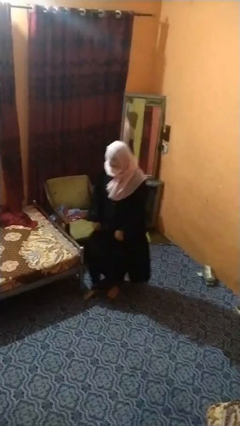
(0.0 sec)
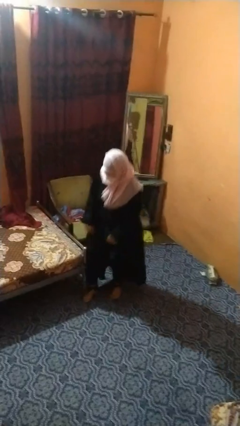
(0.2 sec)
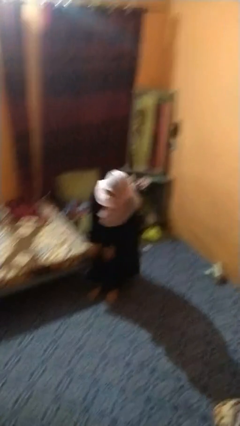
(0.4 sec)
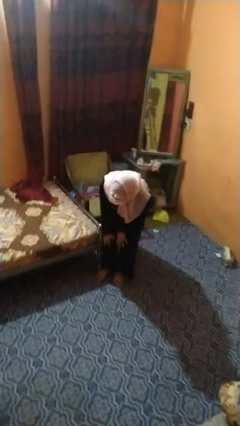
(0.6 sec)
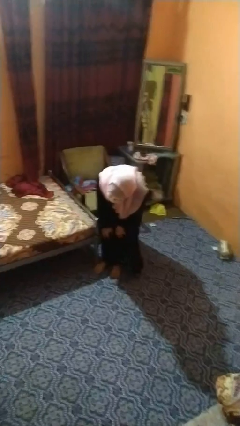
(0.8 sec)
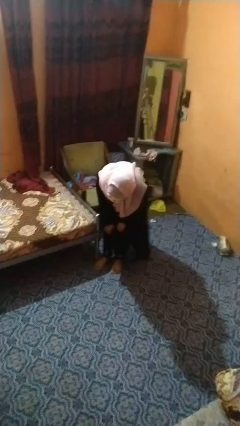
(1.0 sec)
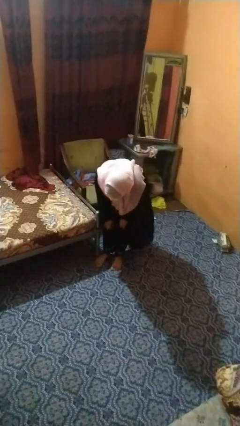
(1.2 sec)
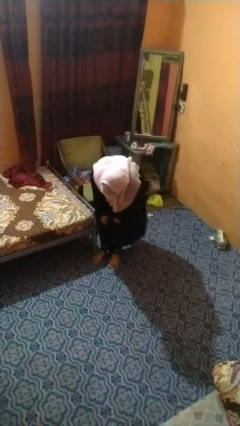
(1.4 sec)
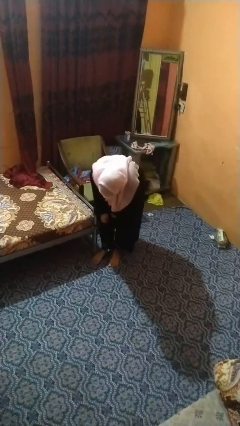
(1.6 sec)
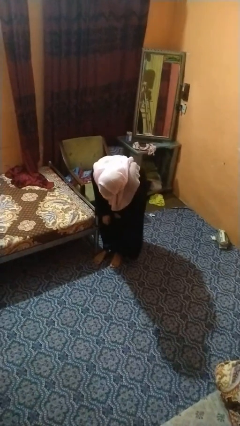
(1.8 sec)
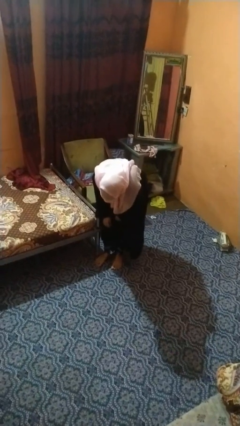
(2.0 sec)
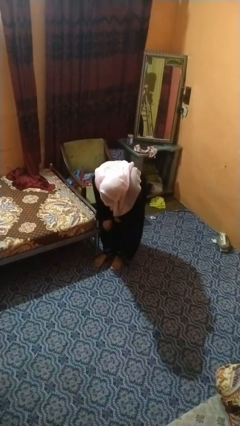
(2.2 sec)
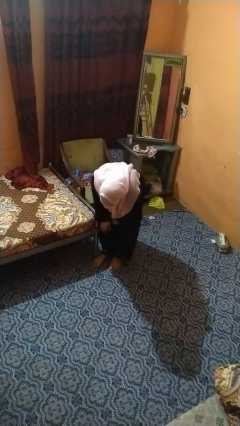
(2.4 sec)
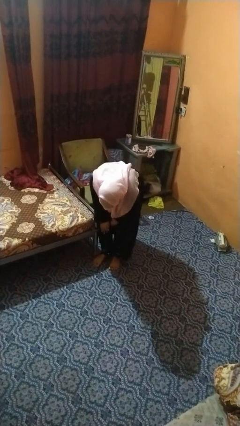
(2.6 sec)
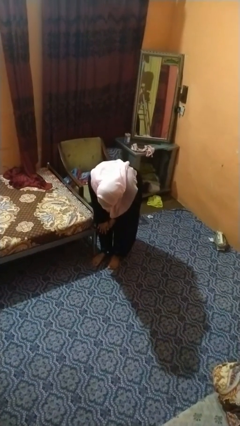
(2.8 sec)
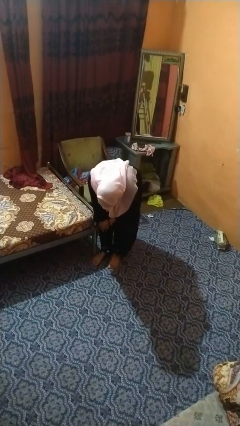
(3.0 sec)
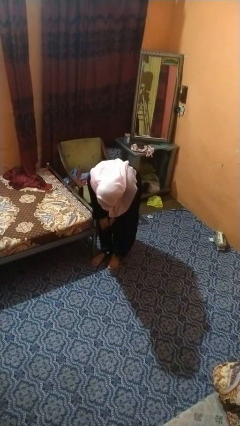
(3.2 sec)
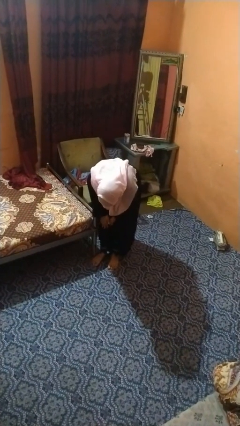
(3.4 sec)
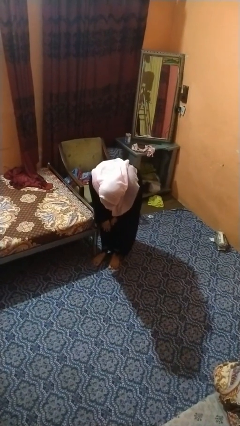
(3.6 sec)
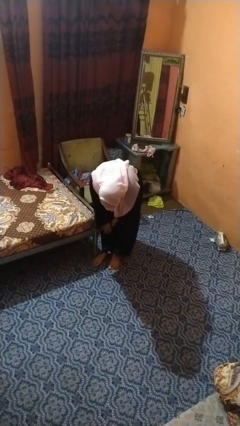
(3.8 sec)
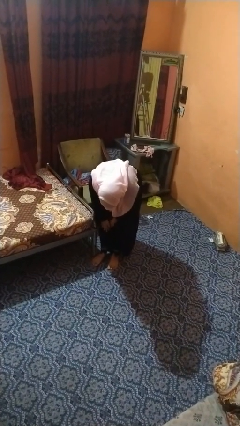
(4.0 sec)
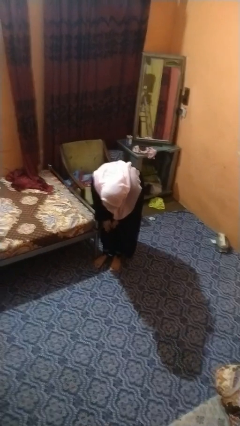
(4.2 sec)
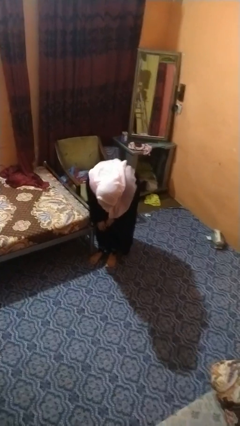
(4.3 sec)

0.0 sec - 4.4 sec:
person trips on object on floor

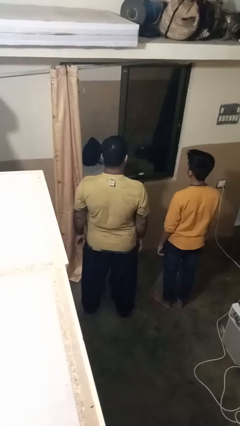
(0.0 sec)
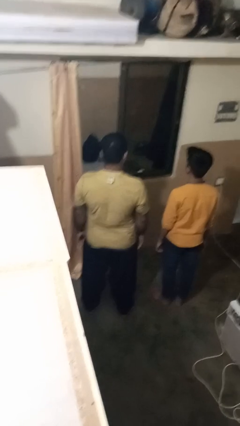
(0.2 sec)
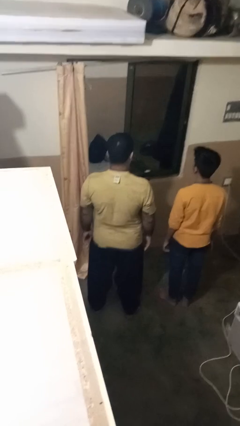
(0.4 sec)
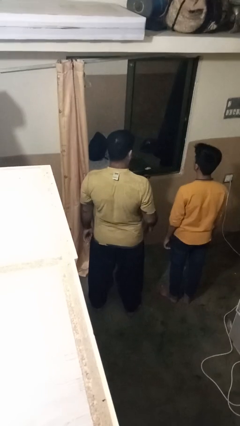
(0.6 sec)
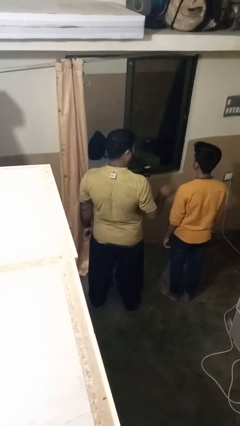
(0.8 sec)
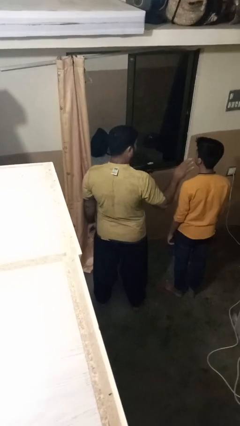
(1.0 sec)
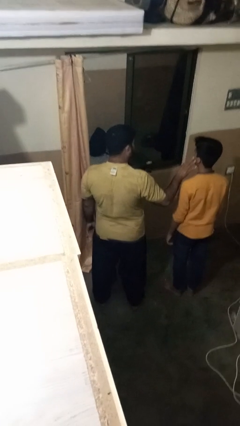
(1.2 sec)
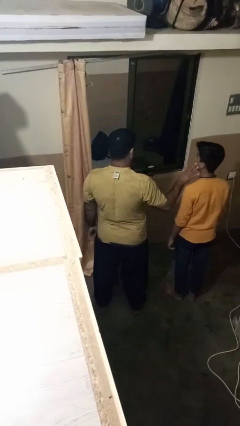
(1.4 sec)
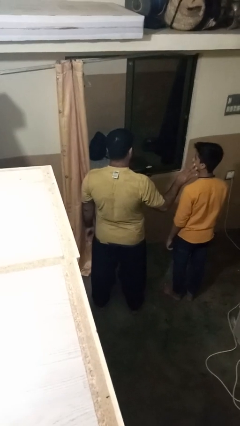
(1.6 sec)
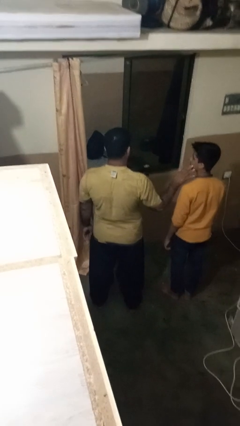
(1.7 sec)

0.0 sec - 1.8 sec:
person touches face of person

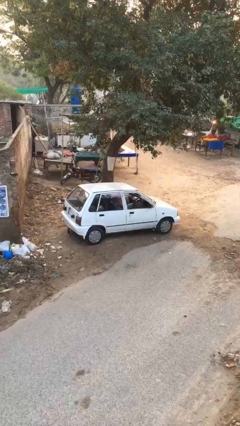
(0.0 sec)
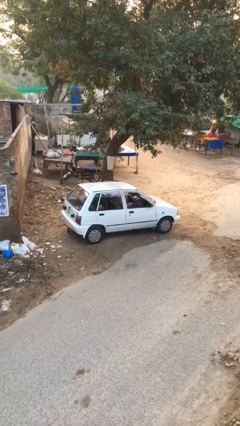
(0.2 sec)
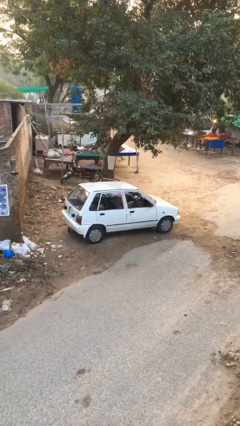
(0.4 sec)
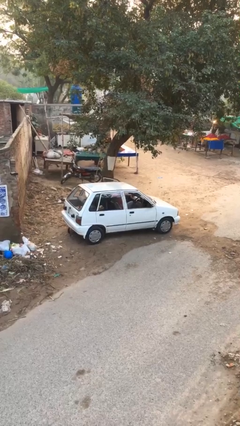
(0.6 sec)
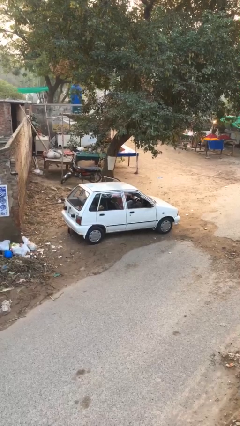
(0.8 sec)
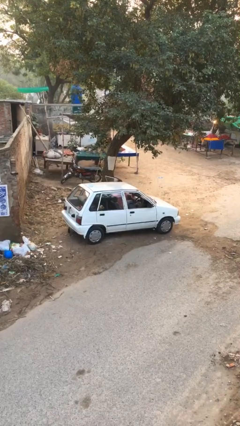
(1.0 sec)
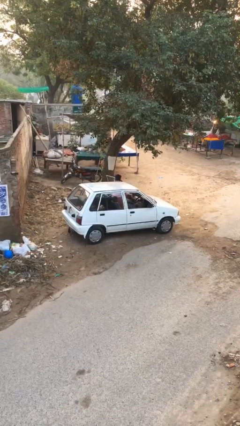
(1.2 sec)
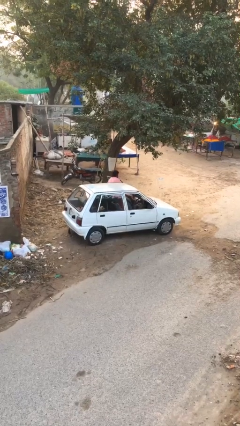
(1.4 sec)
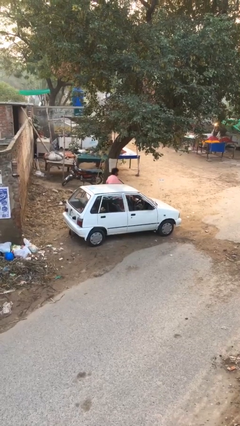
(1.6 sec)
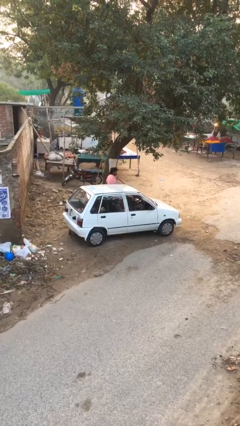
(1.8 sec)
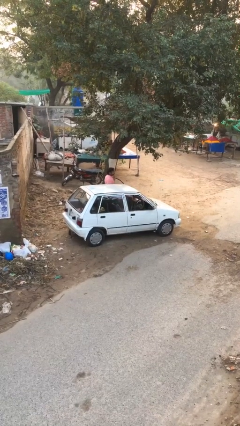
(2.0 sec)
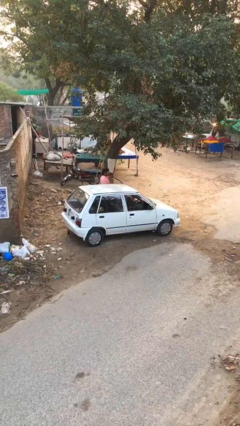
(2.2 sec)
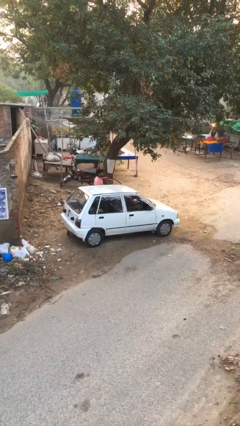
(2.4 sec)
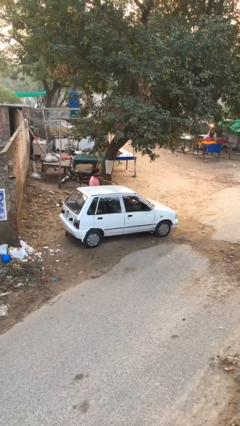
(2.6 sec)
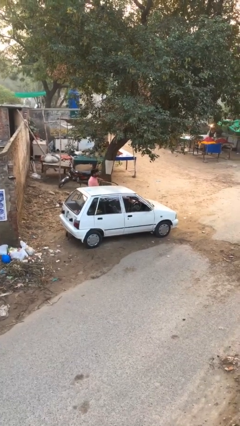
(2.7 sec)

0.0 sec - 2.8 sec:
car drops off person

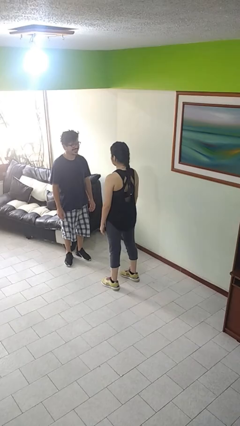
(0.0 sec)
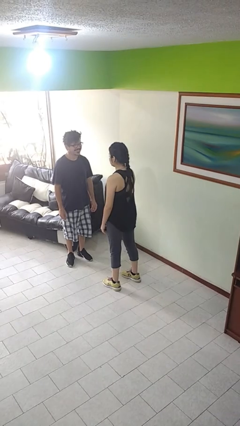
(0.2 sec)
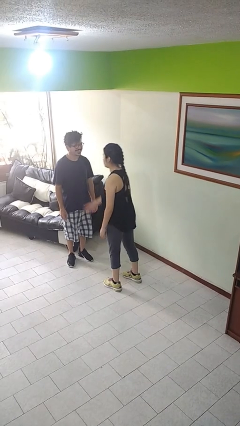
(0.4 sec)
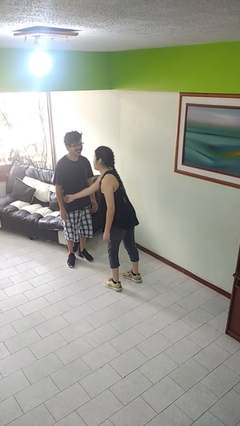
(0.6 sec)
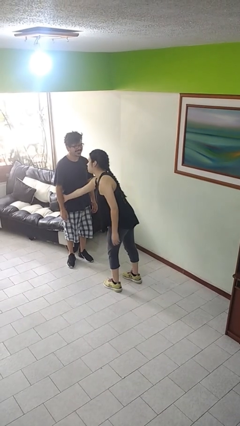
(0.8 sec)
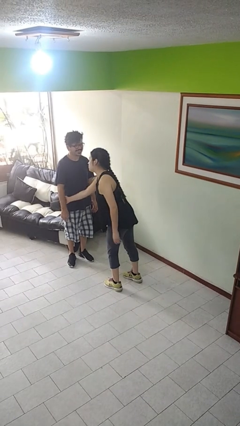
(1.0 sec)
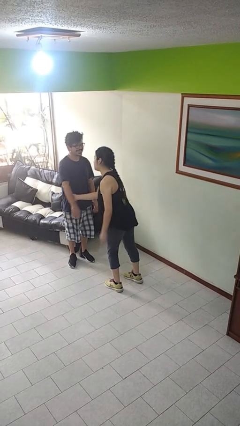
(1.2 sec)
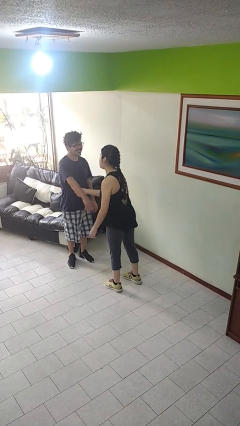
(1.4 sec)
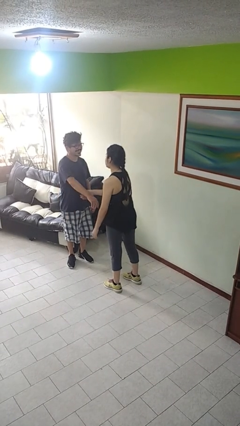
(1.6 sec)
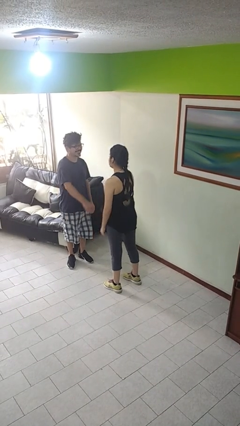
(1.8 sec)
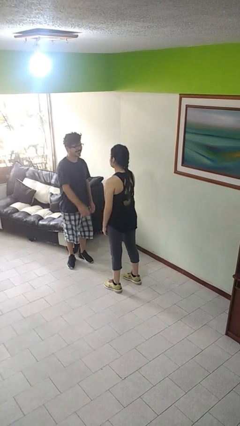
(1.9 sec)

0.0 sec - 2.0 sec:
person grabs person by forearm

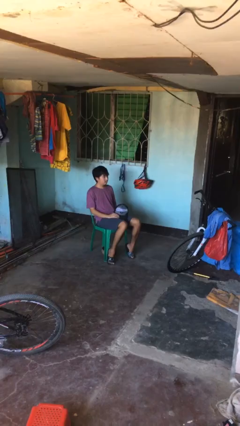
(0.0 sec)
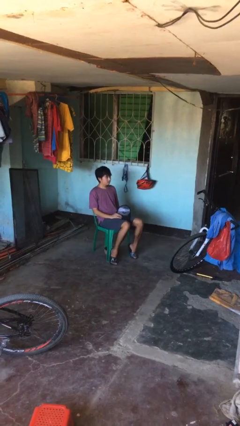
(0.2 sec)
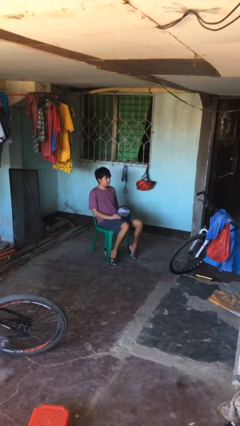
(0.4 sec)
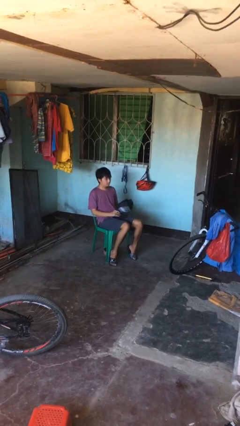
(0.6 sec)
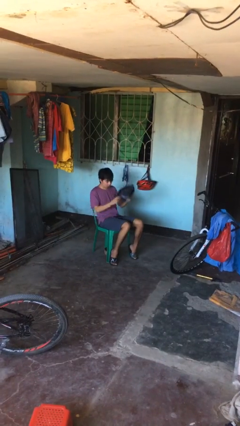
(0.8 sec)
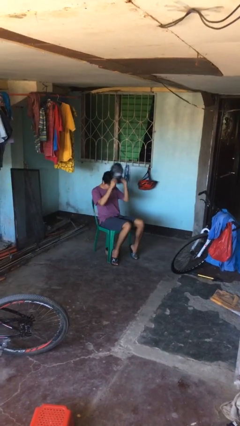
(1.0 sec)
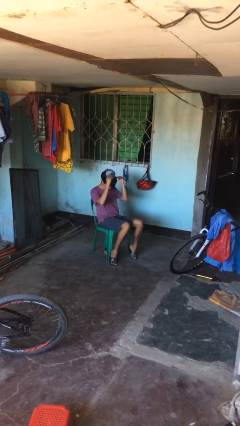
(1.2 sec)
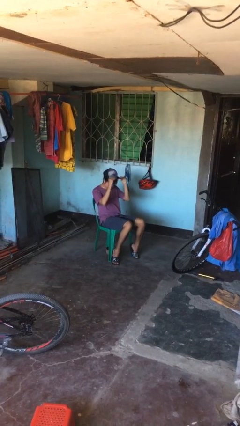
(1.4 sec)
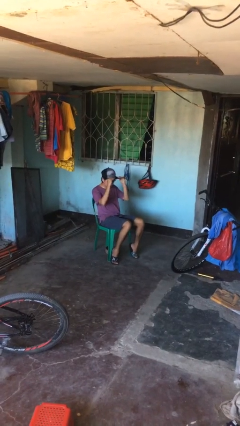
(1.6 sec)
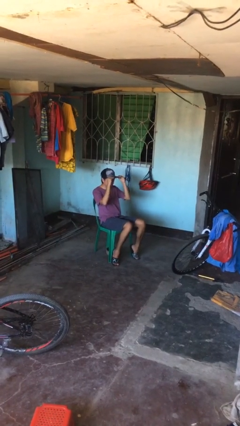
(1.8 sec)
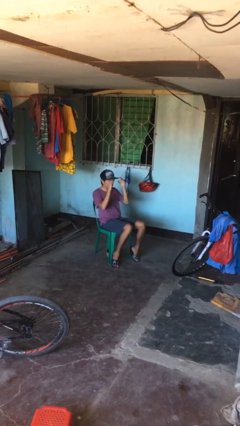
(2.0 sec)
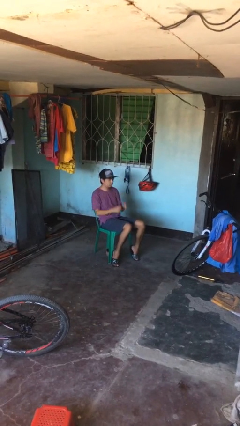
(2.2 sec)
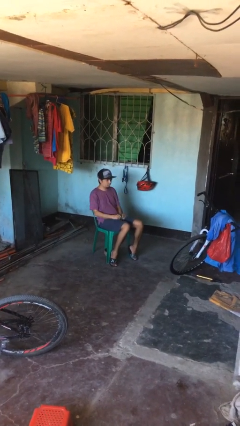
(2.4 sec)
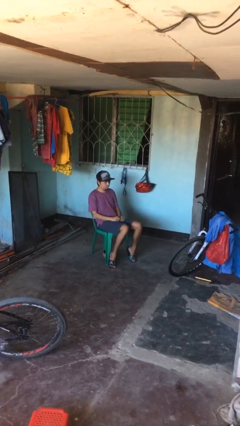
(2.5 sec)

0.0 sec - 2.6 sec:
person puts on hat

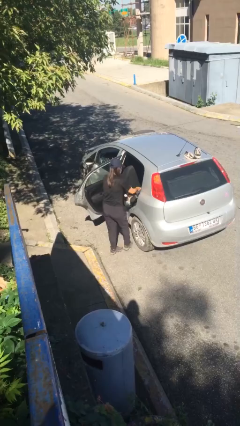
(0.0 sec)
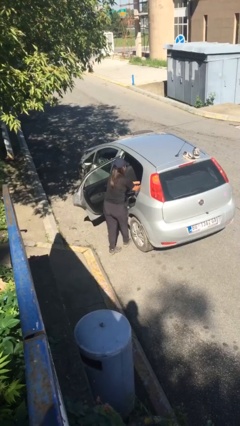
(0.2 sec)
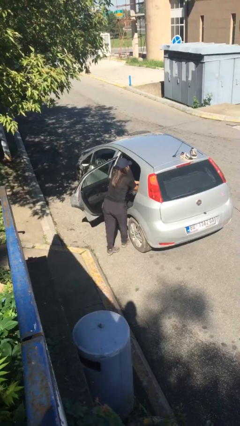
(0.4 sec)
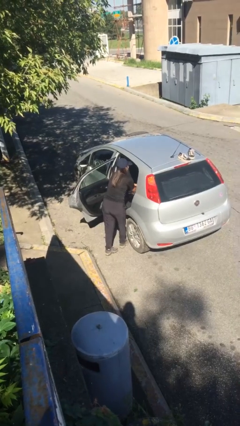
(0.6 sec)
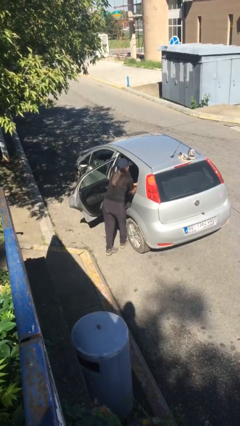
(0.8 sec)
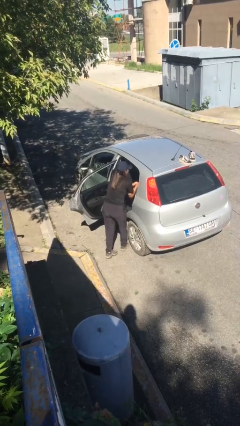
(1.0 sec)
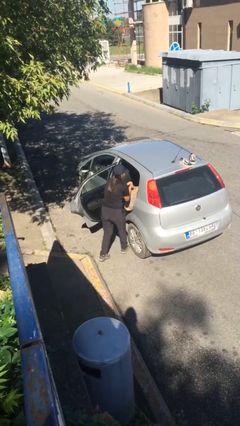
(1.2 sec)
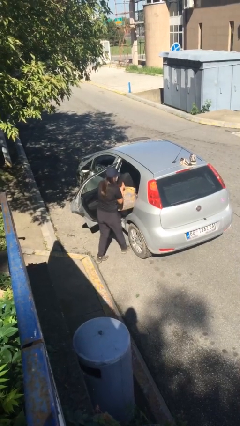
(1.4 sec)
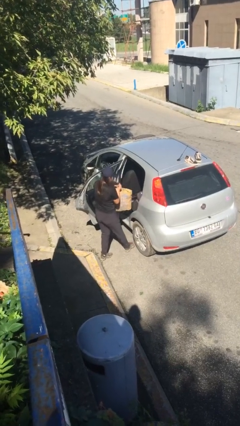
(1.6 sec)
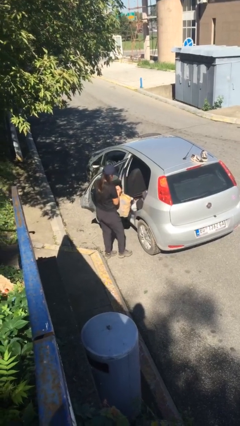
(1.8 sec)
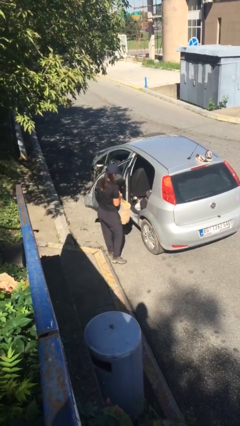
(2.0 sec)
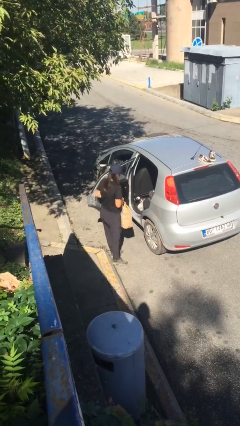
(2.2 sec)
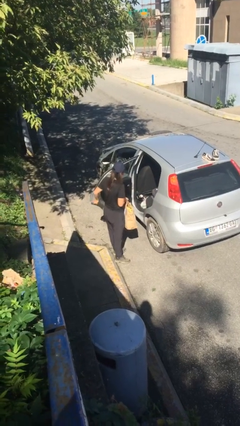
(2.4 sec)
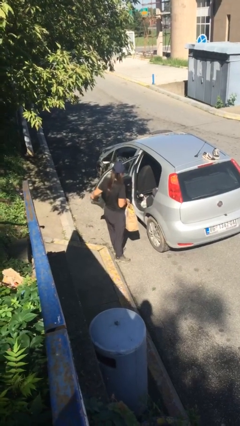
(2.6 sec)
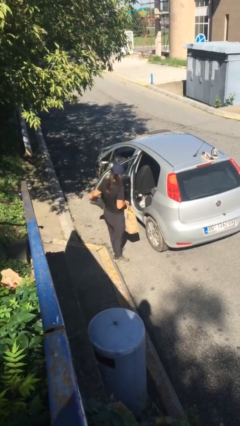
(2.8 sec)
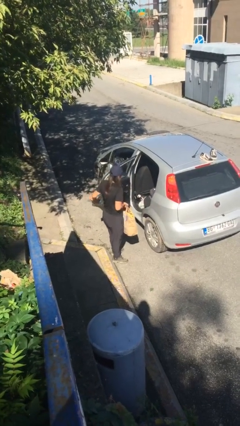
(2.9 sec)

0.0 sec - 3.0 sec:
person unloads car

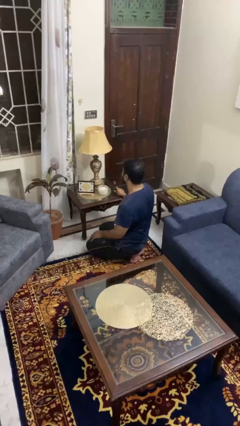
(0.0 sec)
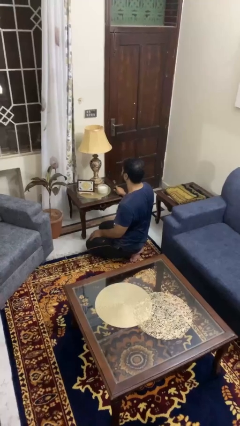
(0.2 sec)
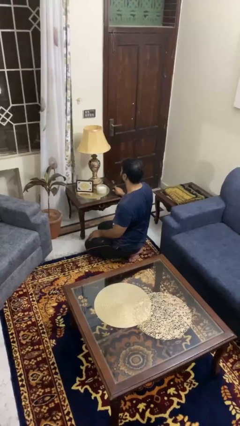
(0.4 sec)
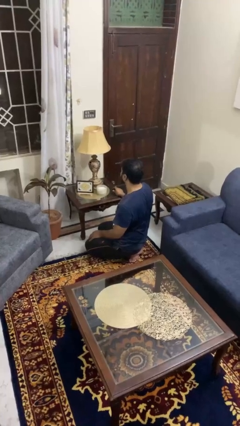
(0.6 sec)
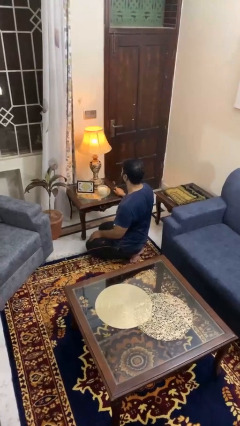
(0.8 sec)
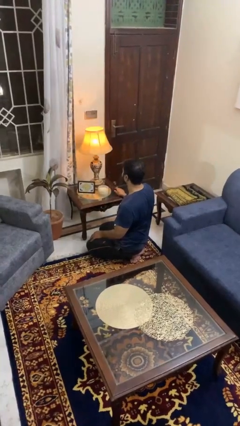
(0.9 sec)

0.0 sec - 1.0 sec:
person turns on lamp
